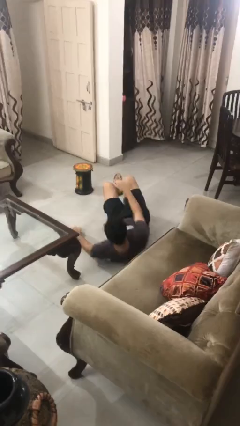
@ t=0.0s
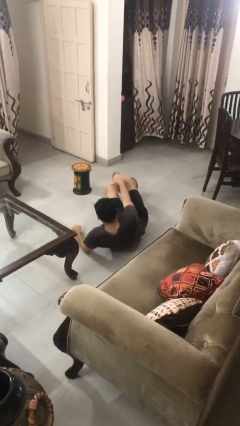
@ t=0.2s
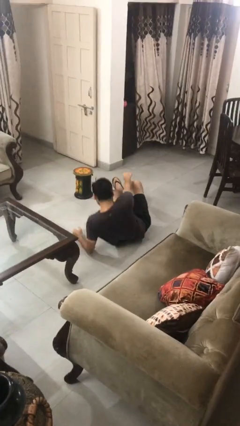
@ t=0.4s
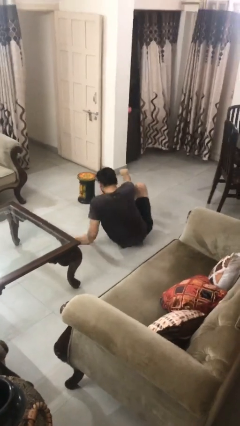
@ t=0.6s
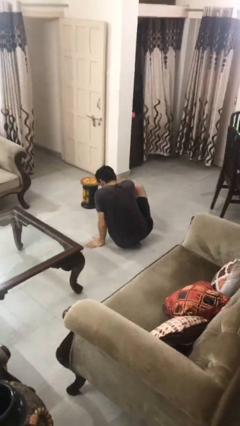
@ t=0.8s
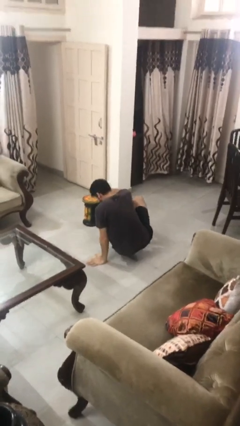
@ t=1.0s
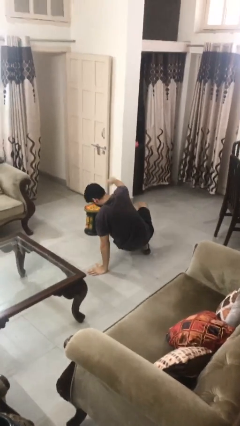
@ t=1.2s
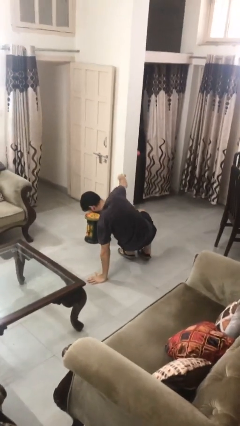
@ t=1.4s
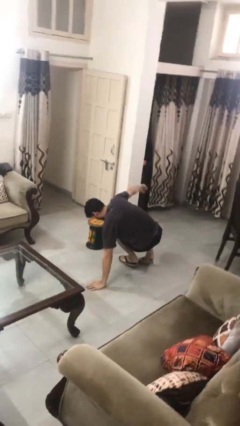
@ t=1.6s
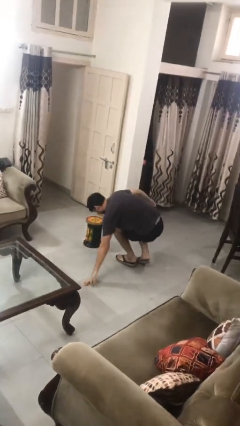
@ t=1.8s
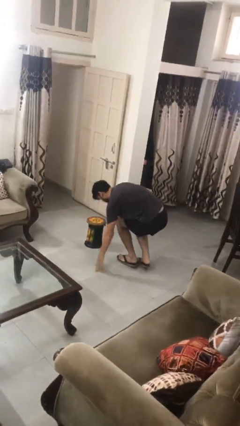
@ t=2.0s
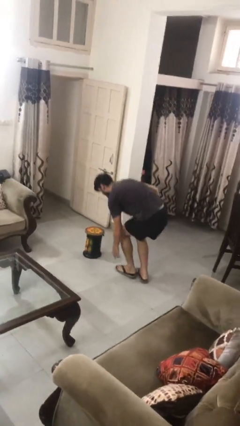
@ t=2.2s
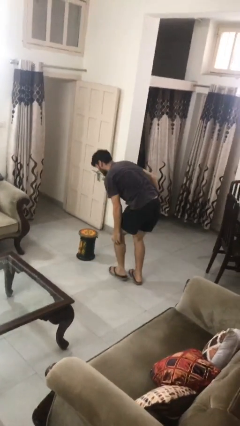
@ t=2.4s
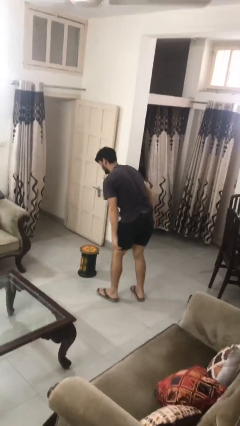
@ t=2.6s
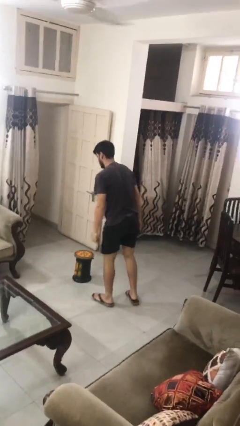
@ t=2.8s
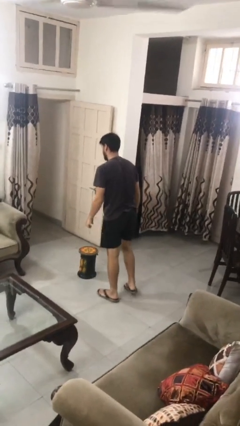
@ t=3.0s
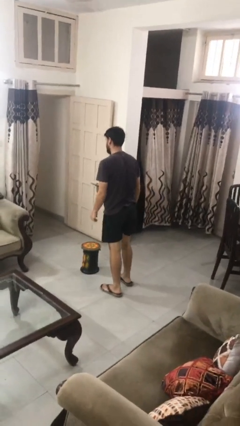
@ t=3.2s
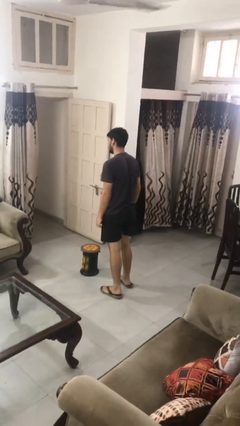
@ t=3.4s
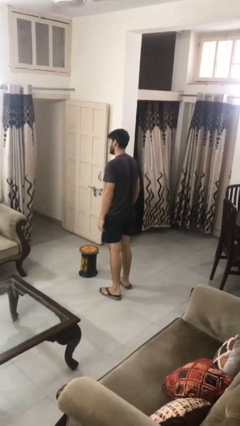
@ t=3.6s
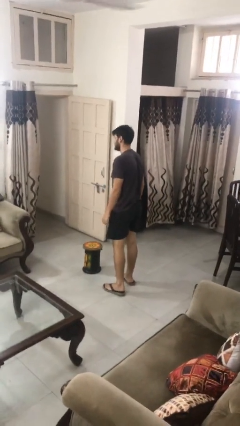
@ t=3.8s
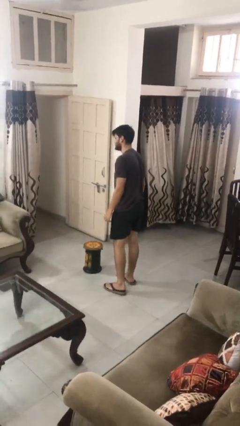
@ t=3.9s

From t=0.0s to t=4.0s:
person stands up from floor

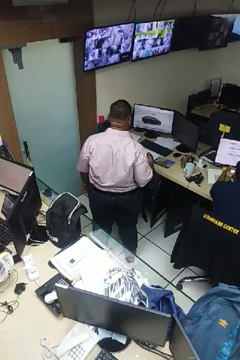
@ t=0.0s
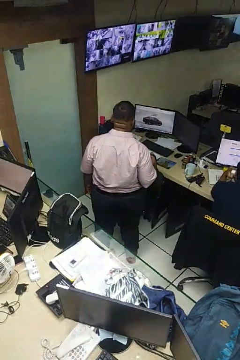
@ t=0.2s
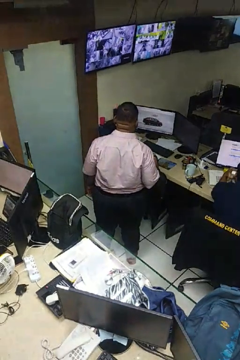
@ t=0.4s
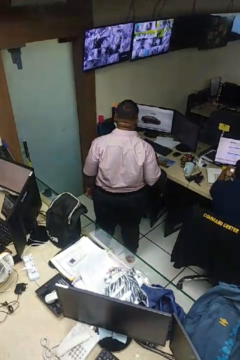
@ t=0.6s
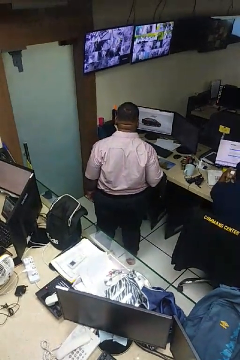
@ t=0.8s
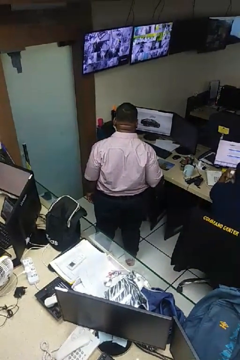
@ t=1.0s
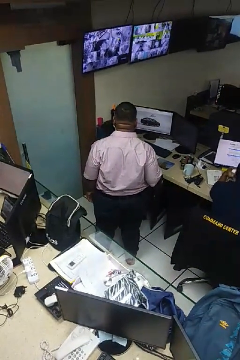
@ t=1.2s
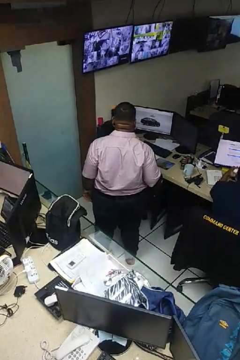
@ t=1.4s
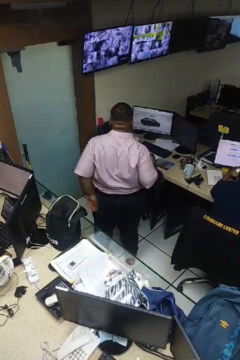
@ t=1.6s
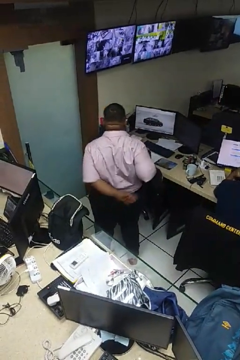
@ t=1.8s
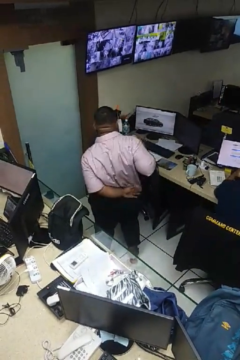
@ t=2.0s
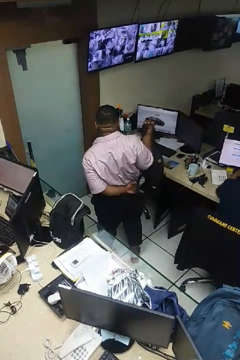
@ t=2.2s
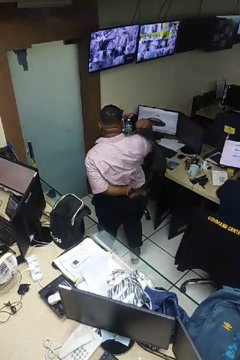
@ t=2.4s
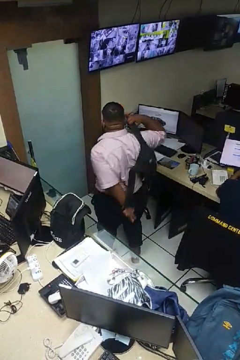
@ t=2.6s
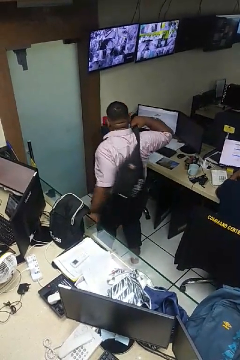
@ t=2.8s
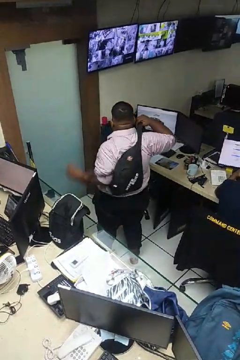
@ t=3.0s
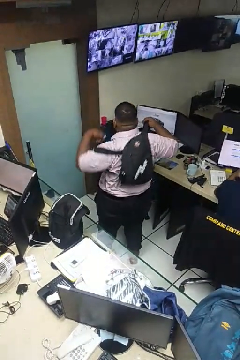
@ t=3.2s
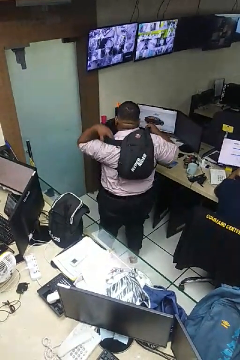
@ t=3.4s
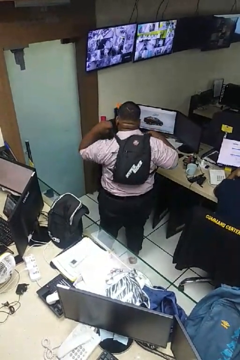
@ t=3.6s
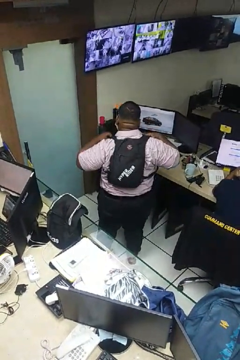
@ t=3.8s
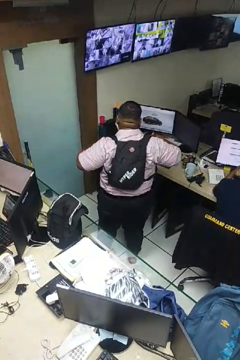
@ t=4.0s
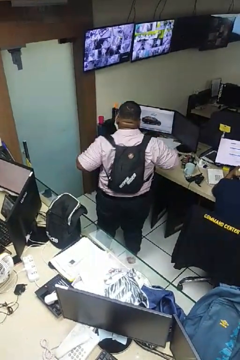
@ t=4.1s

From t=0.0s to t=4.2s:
person puts on backpack

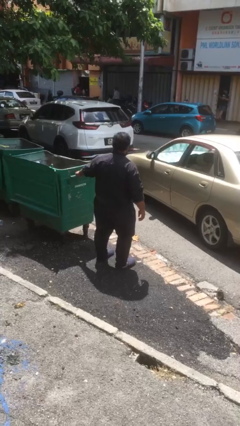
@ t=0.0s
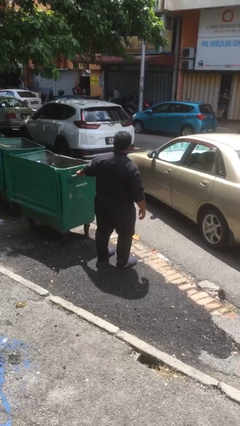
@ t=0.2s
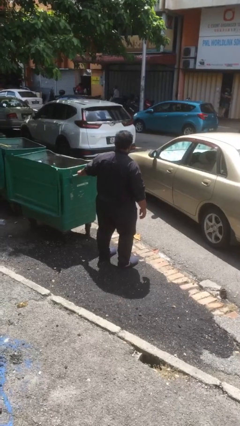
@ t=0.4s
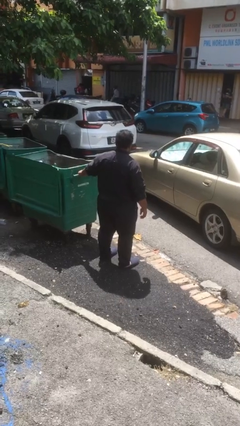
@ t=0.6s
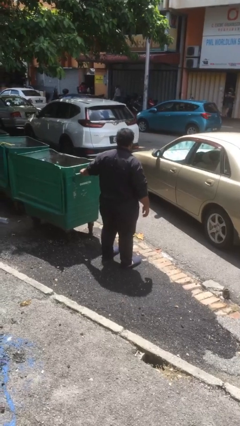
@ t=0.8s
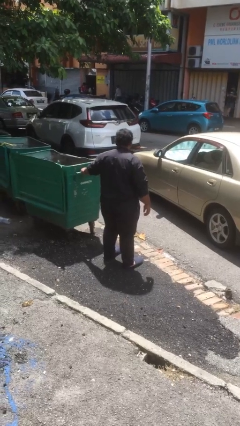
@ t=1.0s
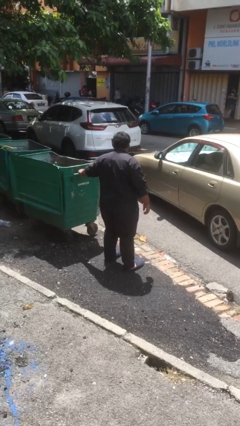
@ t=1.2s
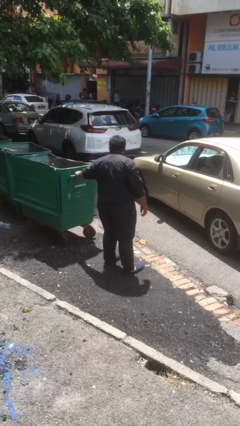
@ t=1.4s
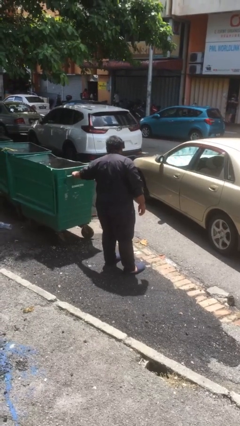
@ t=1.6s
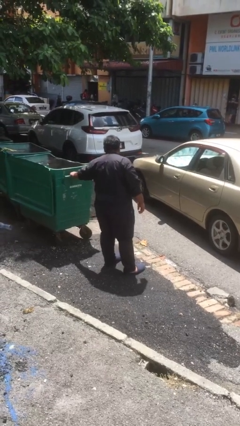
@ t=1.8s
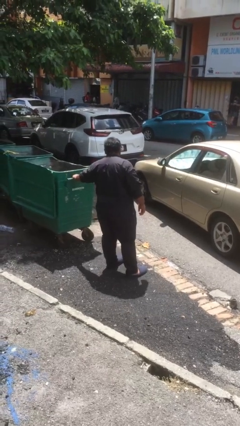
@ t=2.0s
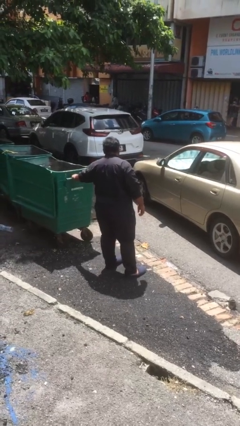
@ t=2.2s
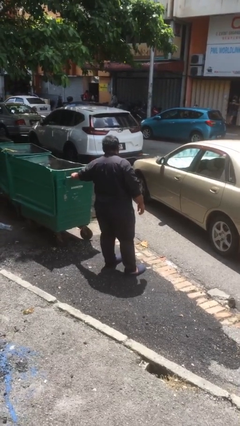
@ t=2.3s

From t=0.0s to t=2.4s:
person pushes wheeled trashcan

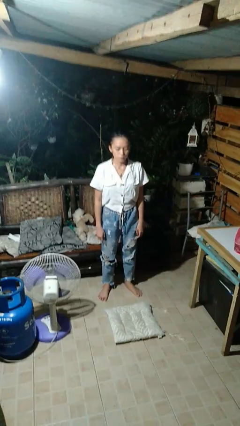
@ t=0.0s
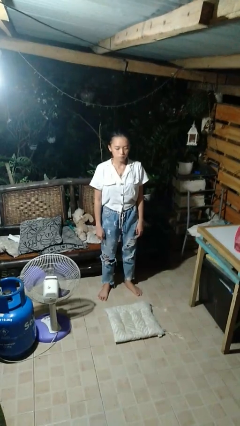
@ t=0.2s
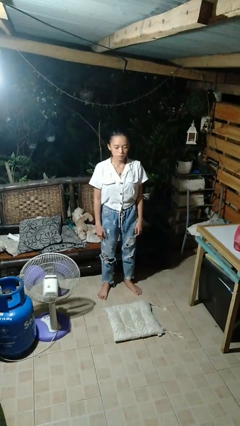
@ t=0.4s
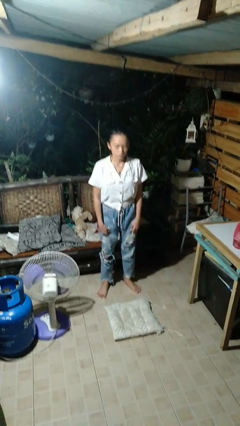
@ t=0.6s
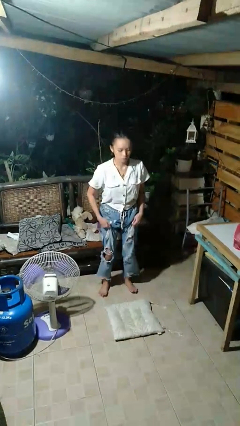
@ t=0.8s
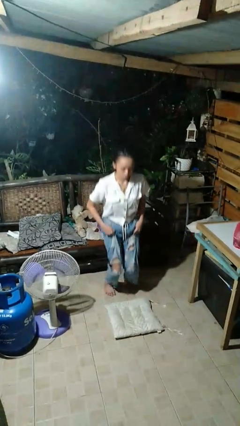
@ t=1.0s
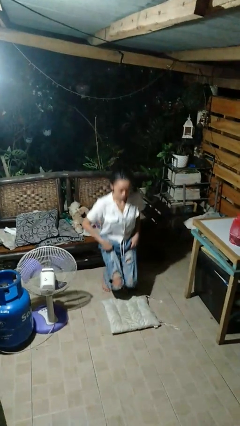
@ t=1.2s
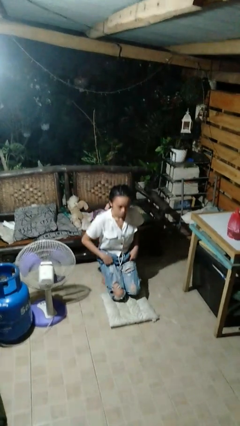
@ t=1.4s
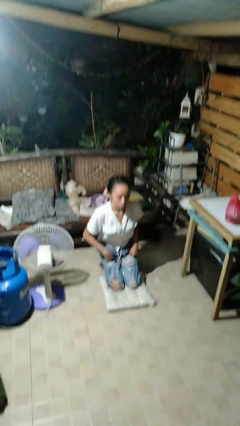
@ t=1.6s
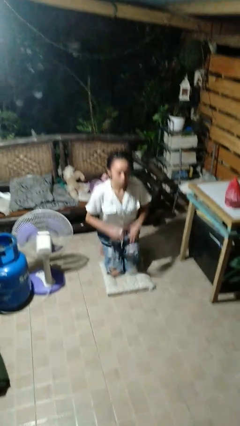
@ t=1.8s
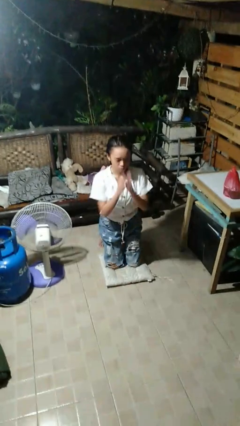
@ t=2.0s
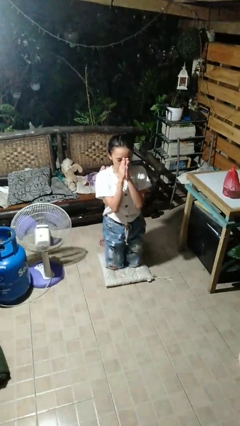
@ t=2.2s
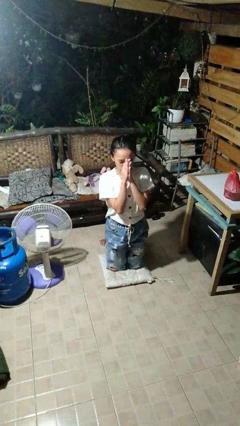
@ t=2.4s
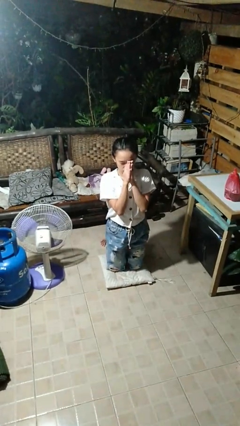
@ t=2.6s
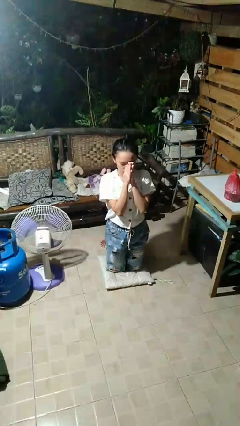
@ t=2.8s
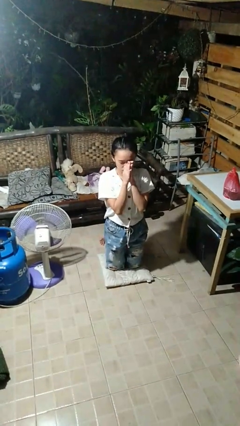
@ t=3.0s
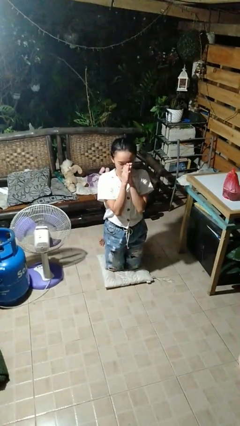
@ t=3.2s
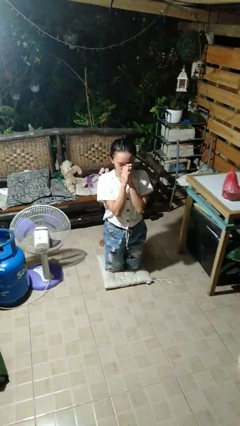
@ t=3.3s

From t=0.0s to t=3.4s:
person prays

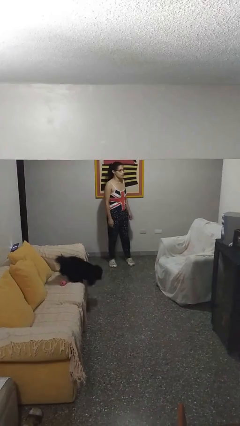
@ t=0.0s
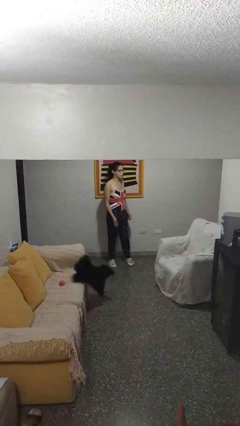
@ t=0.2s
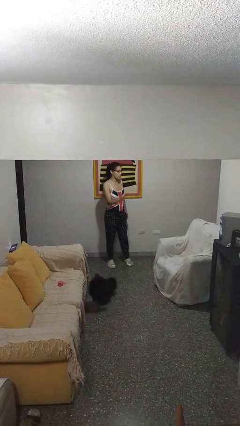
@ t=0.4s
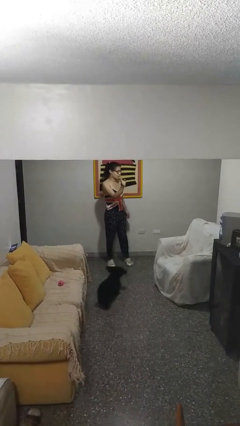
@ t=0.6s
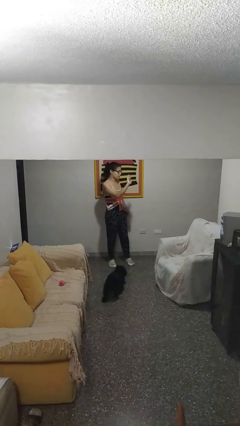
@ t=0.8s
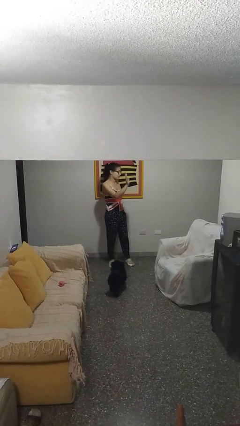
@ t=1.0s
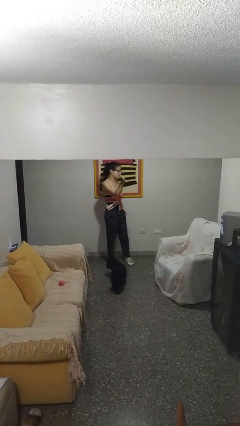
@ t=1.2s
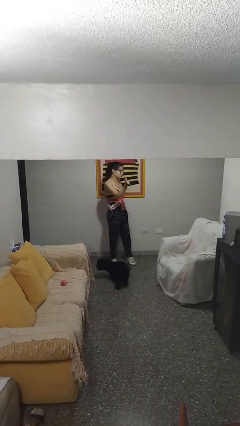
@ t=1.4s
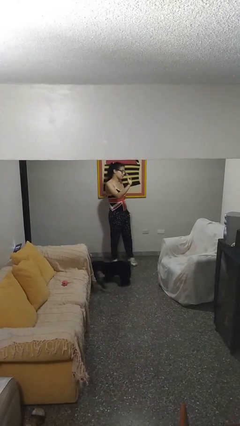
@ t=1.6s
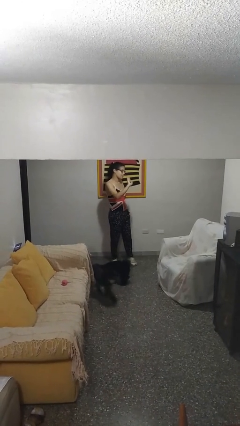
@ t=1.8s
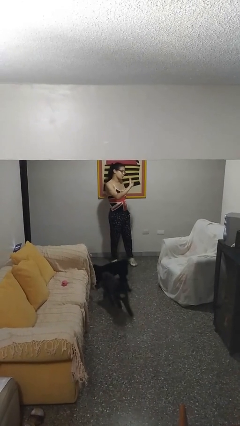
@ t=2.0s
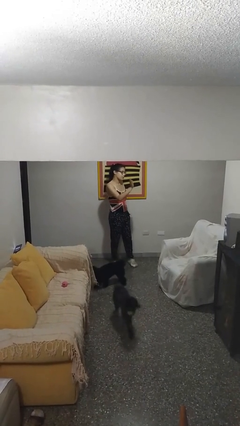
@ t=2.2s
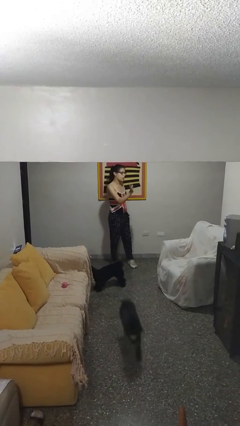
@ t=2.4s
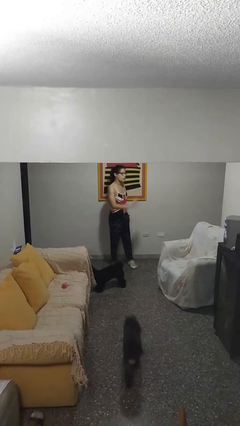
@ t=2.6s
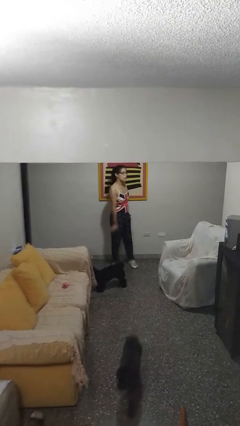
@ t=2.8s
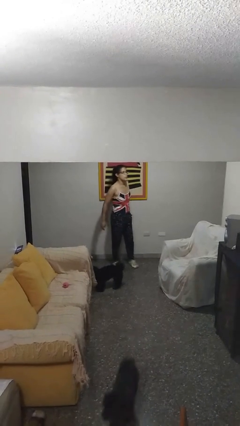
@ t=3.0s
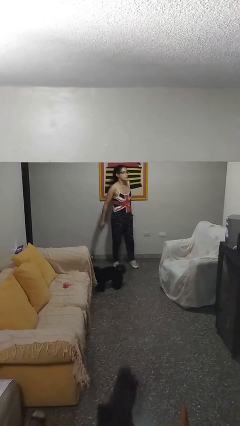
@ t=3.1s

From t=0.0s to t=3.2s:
person waves at person

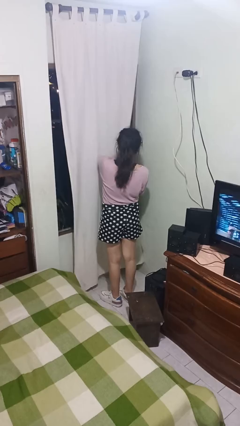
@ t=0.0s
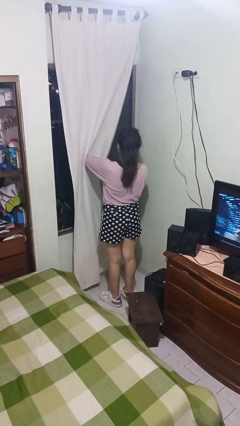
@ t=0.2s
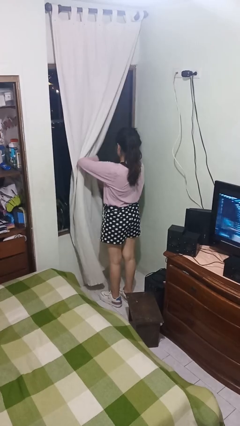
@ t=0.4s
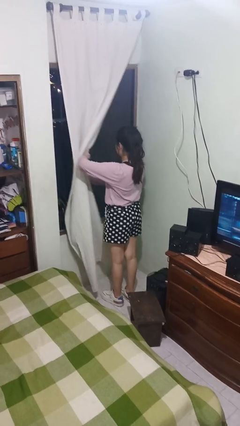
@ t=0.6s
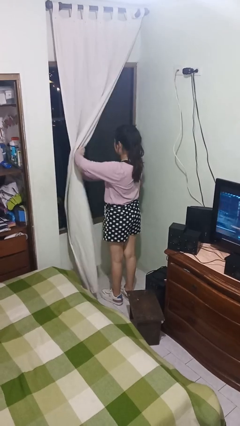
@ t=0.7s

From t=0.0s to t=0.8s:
person opens curtains
